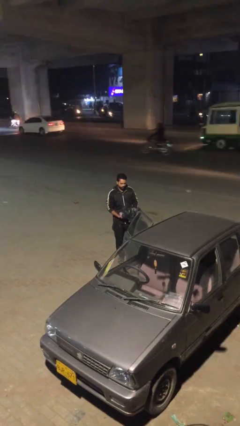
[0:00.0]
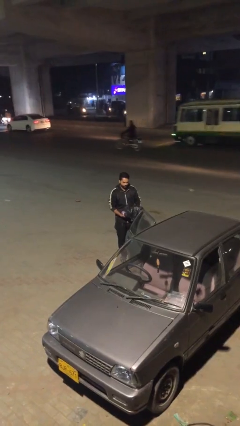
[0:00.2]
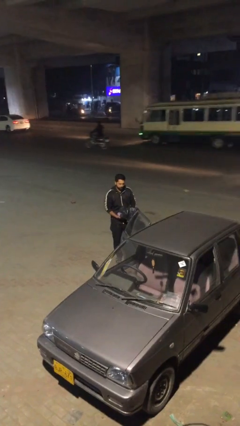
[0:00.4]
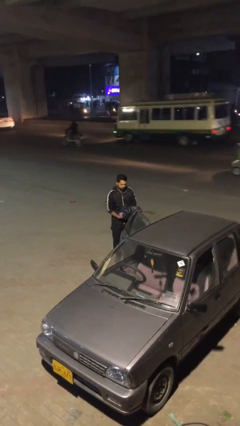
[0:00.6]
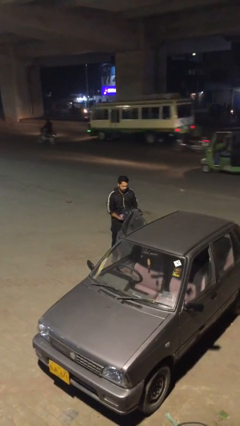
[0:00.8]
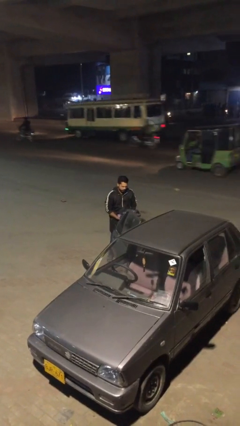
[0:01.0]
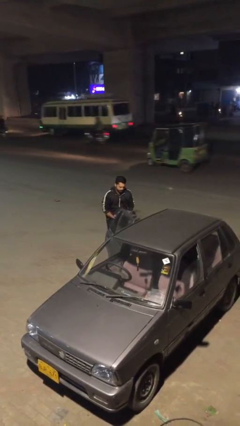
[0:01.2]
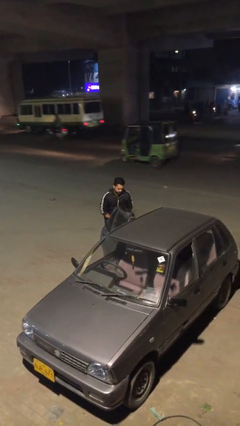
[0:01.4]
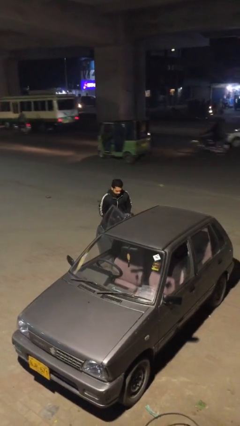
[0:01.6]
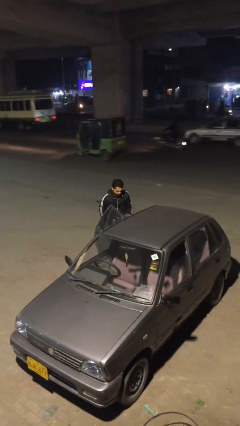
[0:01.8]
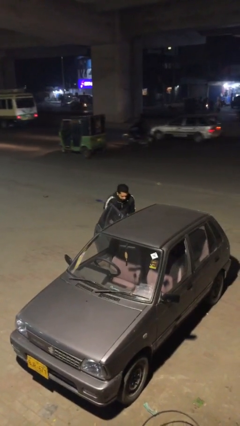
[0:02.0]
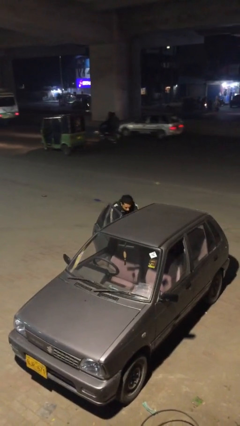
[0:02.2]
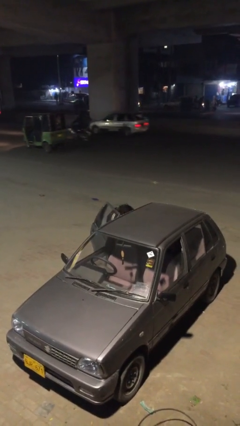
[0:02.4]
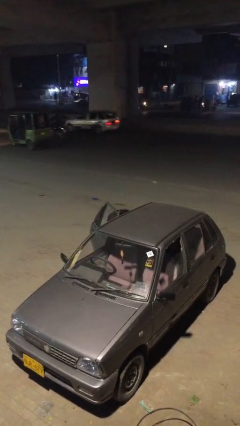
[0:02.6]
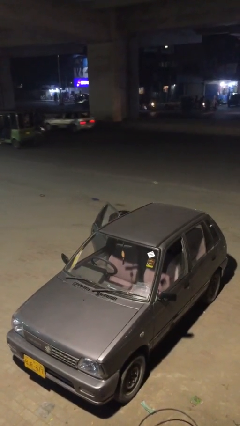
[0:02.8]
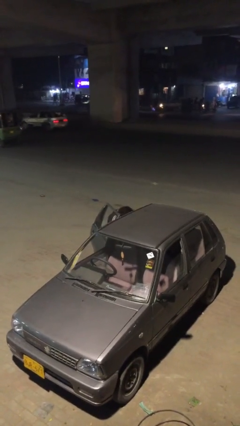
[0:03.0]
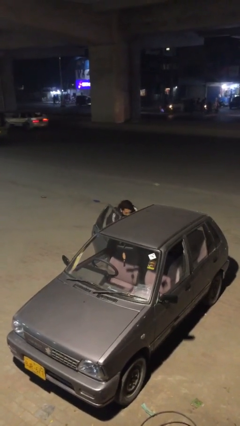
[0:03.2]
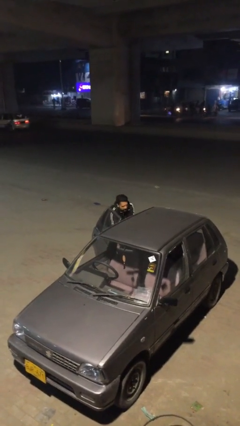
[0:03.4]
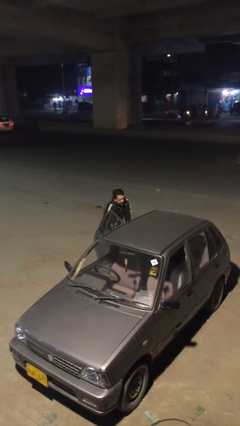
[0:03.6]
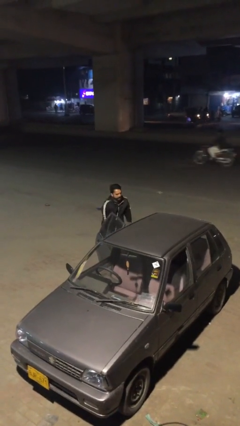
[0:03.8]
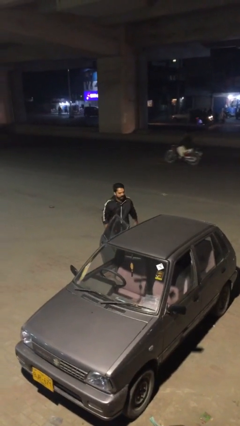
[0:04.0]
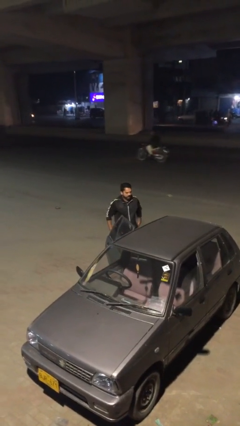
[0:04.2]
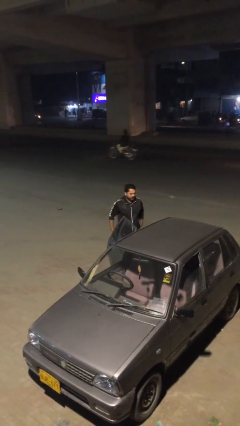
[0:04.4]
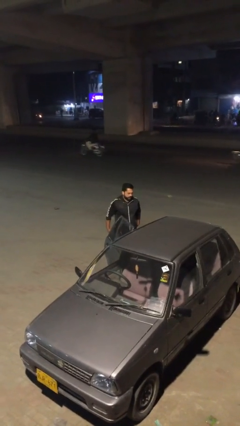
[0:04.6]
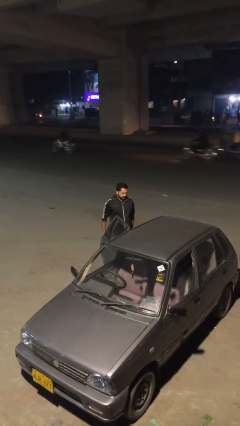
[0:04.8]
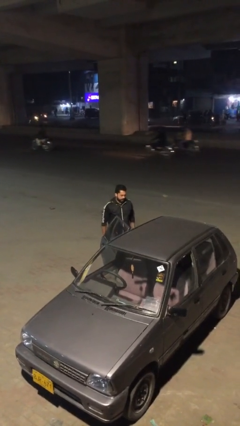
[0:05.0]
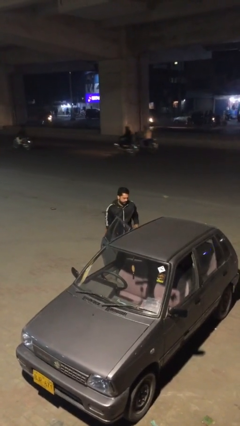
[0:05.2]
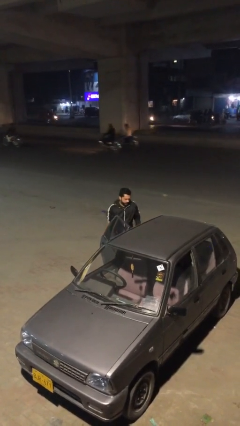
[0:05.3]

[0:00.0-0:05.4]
person loads car

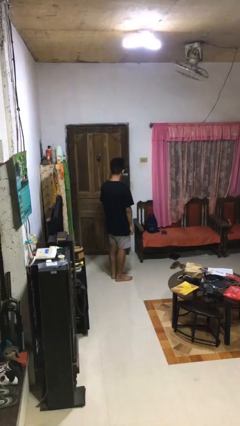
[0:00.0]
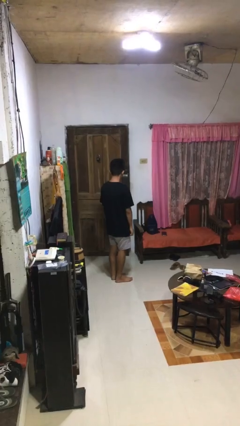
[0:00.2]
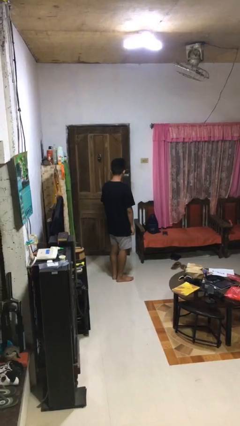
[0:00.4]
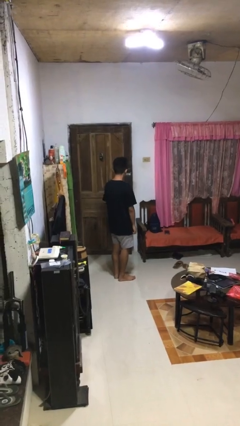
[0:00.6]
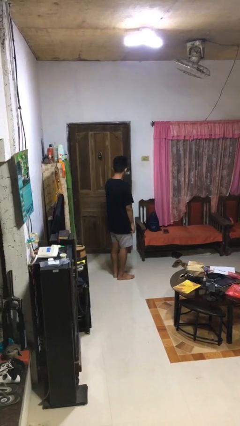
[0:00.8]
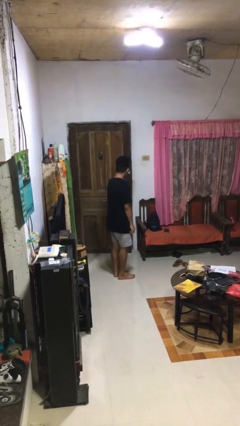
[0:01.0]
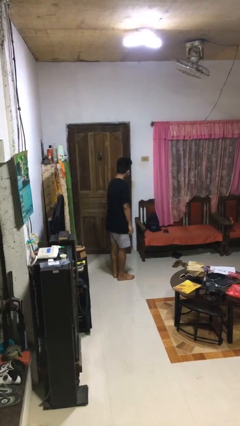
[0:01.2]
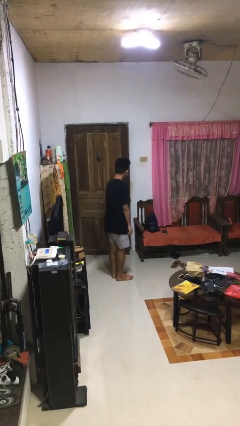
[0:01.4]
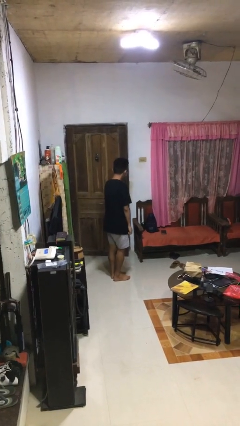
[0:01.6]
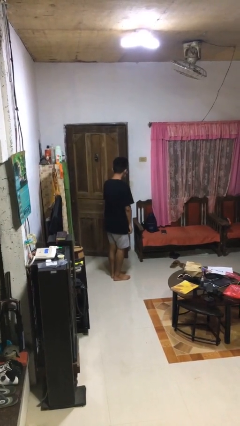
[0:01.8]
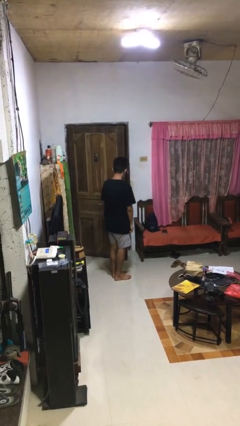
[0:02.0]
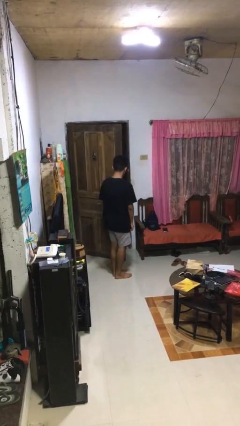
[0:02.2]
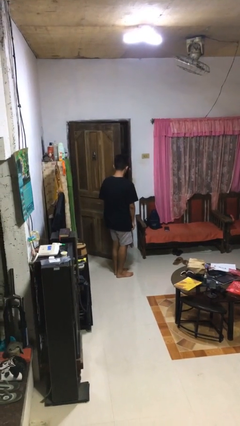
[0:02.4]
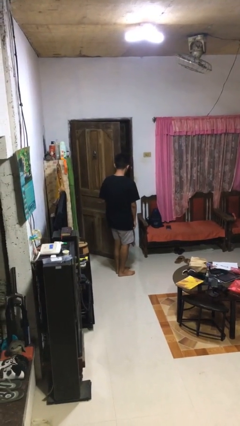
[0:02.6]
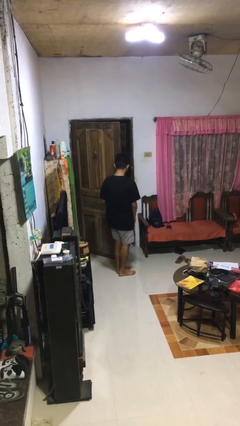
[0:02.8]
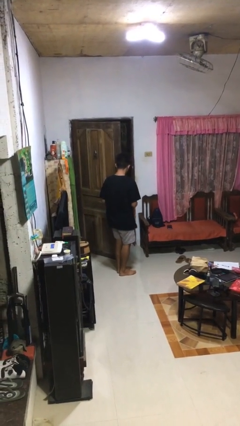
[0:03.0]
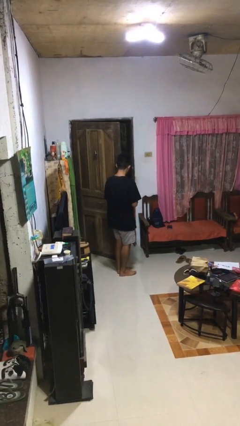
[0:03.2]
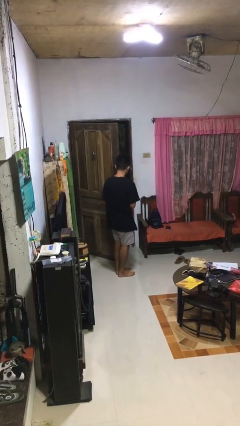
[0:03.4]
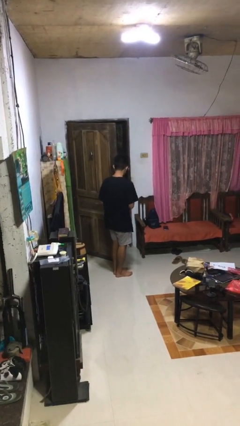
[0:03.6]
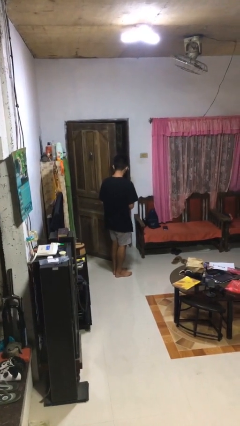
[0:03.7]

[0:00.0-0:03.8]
person opens facility door

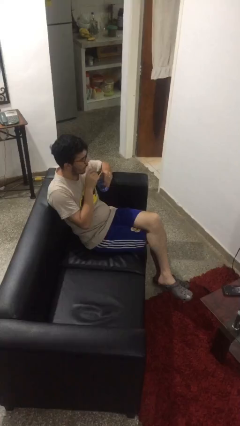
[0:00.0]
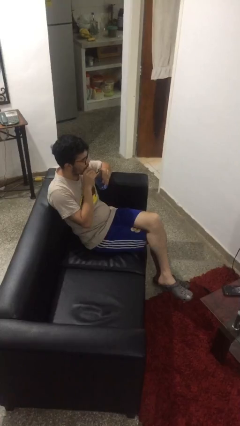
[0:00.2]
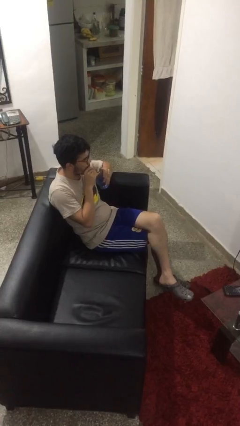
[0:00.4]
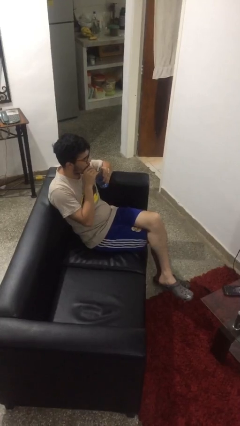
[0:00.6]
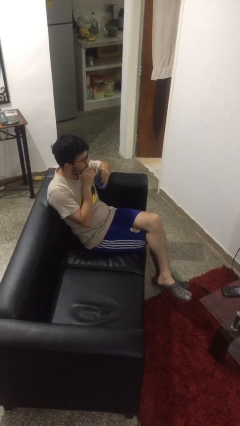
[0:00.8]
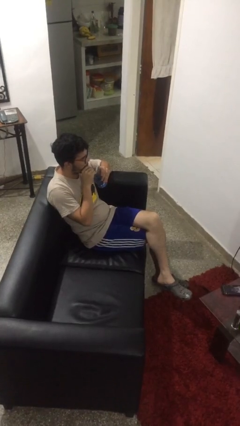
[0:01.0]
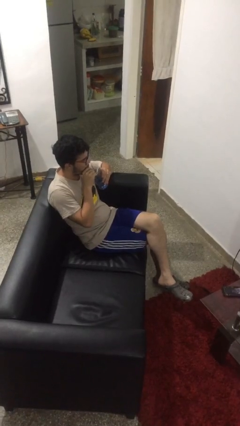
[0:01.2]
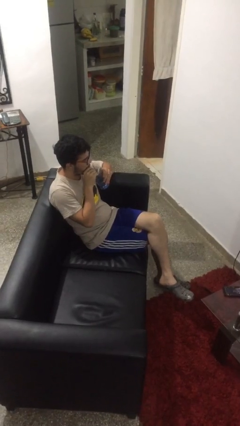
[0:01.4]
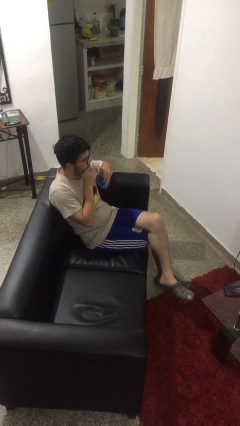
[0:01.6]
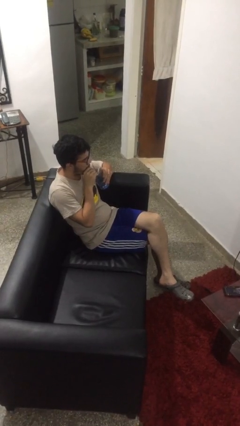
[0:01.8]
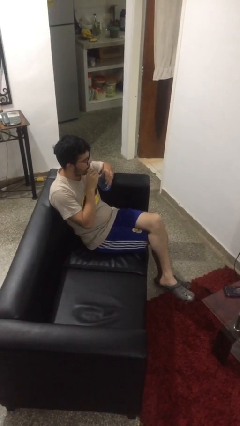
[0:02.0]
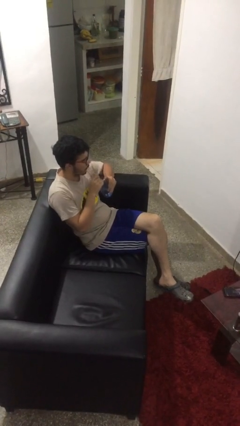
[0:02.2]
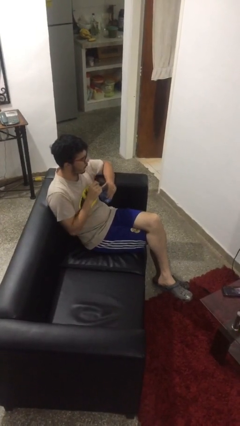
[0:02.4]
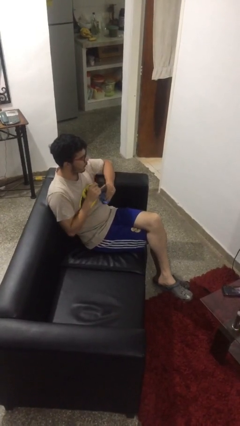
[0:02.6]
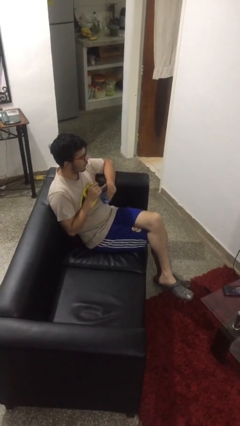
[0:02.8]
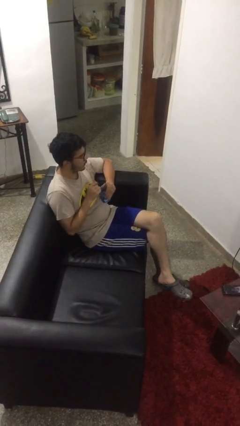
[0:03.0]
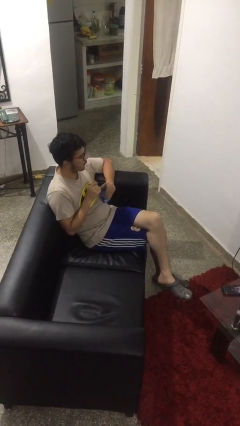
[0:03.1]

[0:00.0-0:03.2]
person drinks from straw

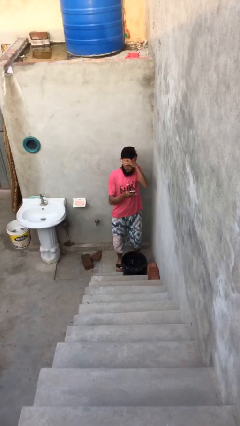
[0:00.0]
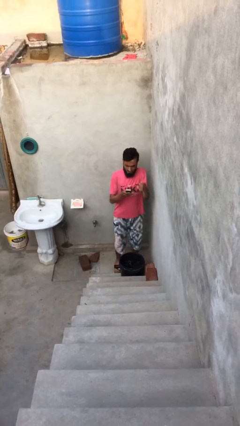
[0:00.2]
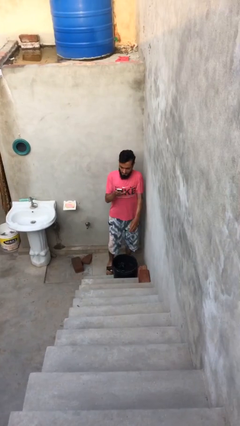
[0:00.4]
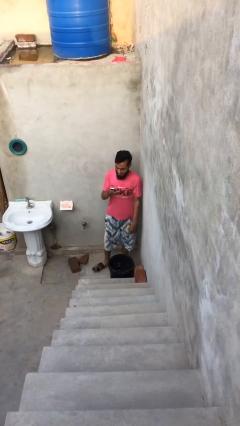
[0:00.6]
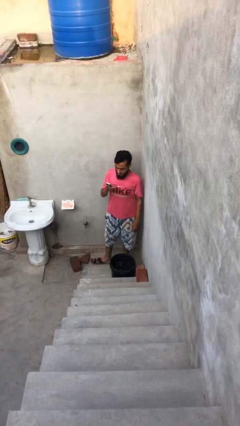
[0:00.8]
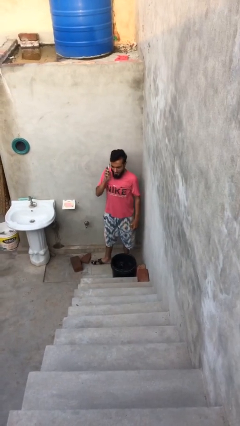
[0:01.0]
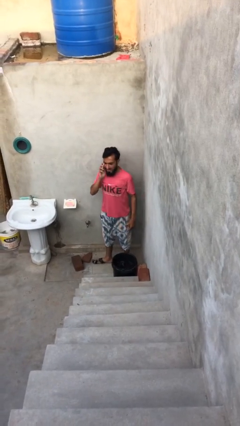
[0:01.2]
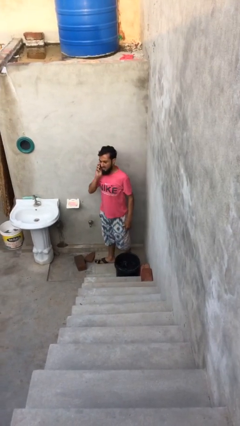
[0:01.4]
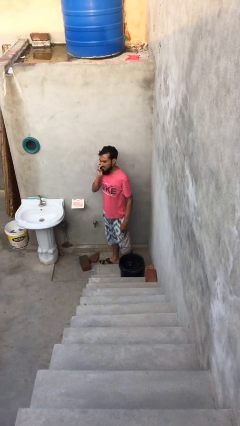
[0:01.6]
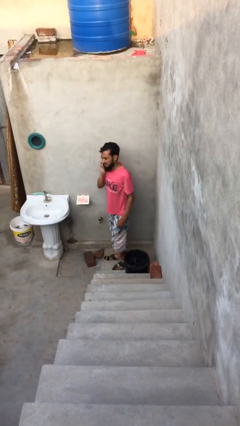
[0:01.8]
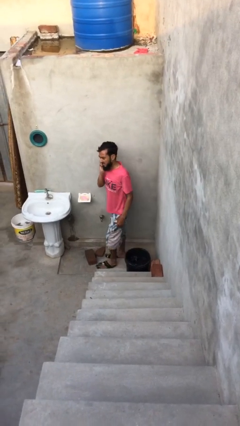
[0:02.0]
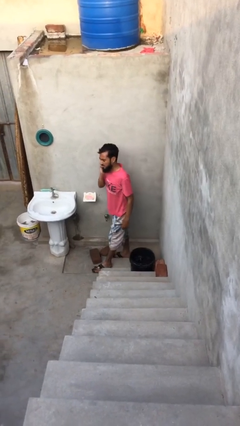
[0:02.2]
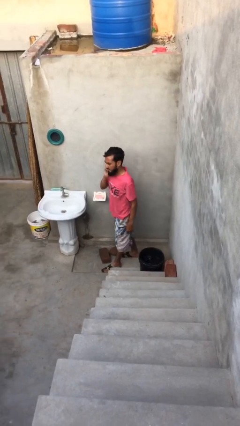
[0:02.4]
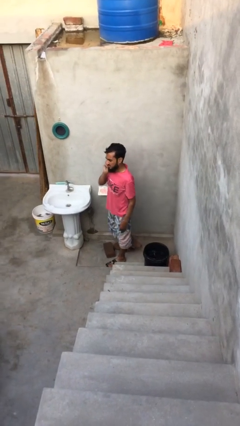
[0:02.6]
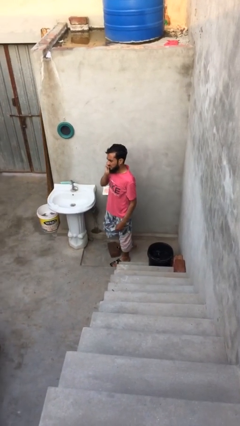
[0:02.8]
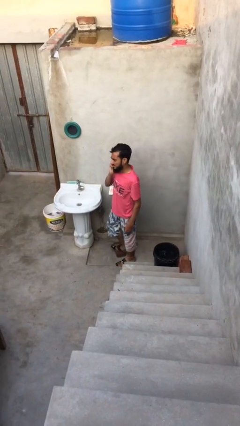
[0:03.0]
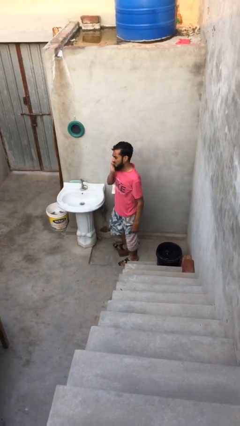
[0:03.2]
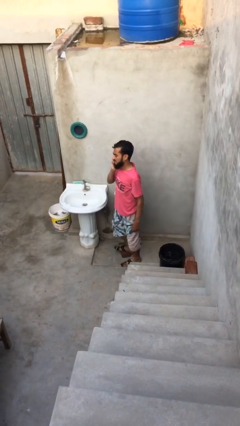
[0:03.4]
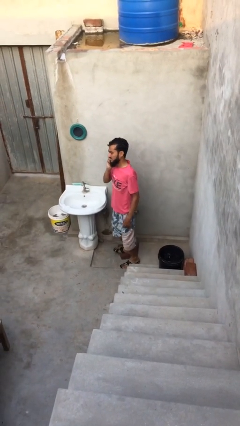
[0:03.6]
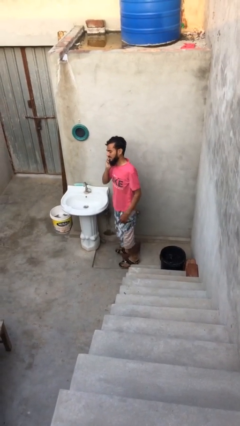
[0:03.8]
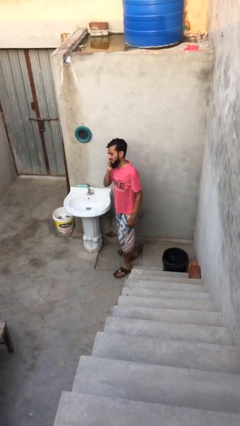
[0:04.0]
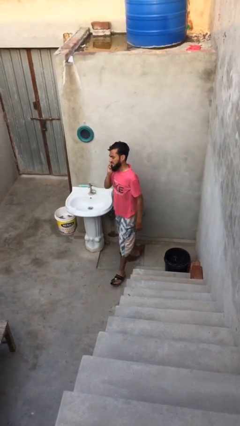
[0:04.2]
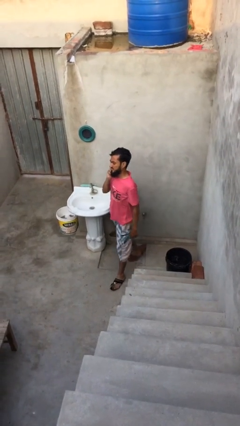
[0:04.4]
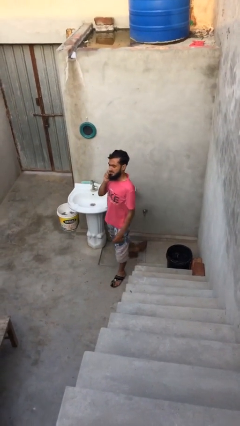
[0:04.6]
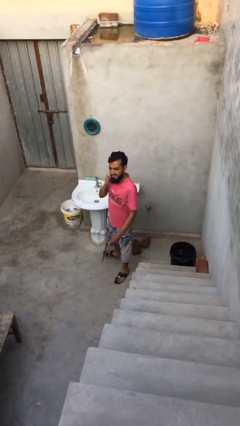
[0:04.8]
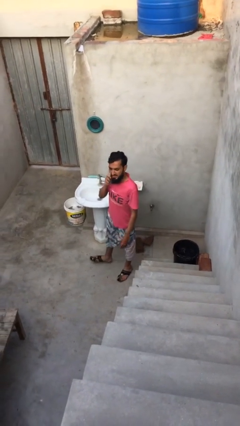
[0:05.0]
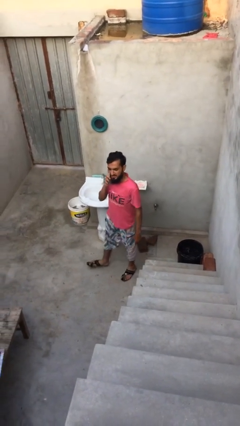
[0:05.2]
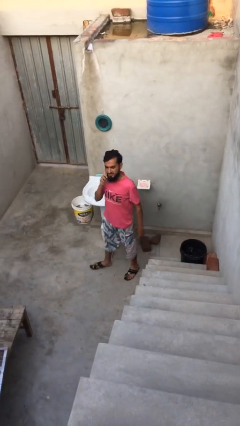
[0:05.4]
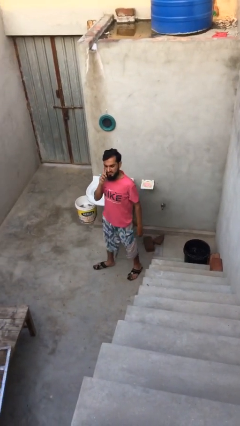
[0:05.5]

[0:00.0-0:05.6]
person talks on phone
